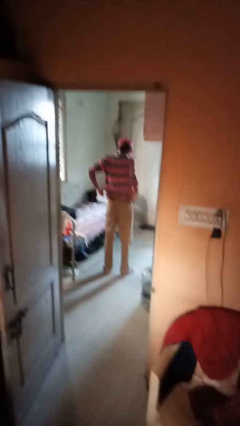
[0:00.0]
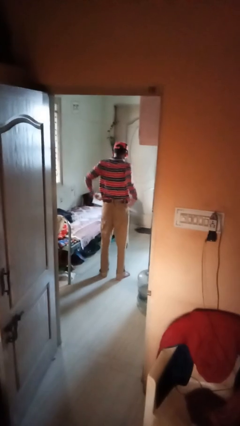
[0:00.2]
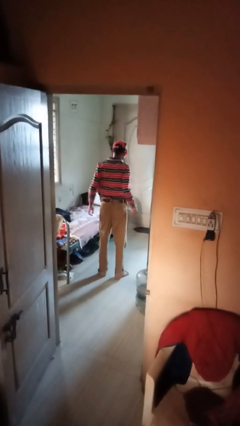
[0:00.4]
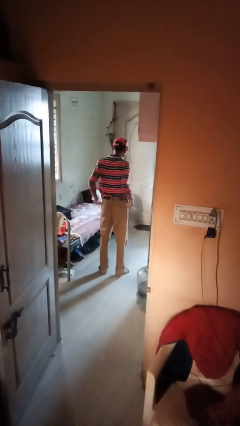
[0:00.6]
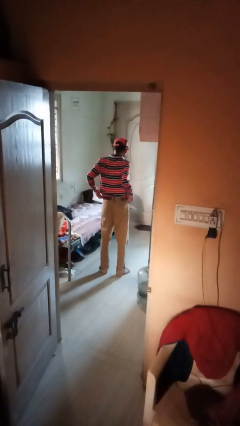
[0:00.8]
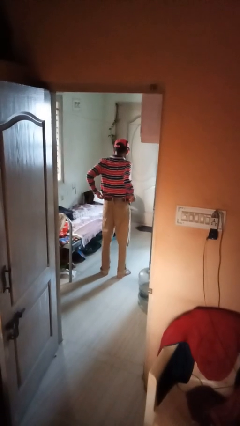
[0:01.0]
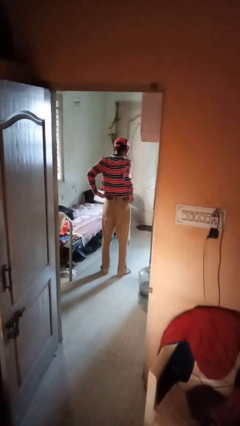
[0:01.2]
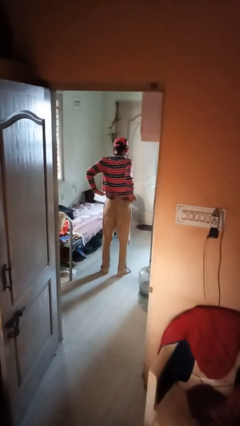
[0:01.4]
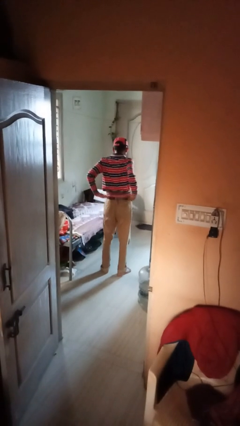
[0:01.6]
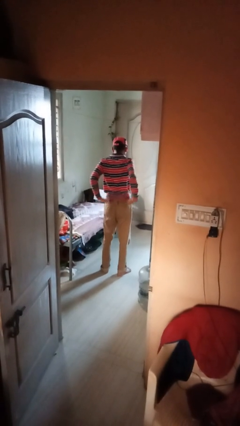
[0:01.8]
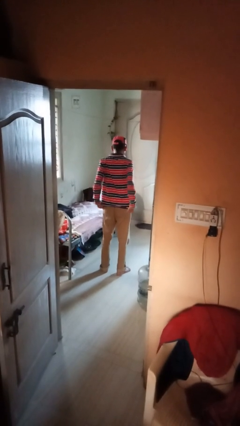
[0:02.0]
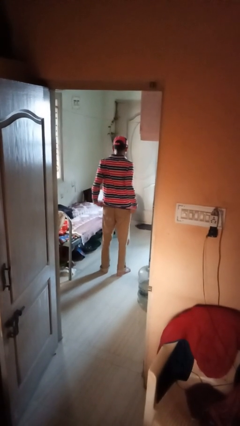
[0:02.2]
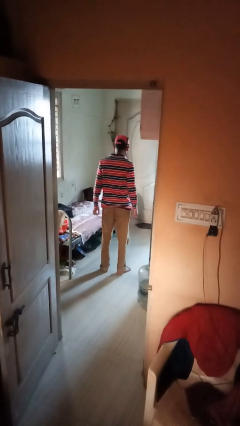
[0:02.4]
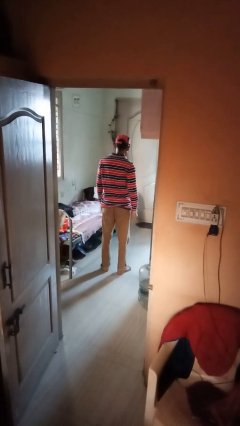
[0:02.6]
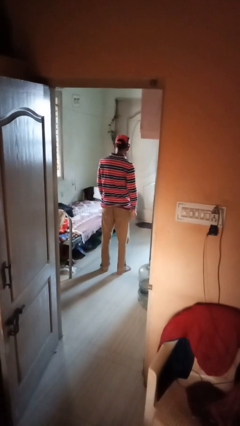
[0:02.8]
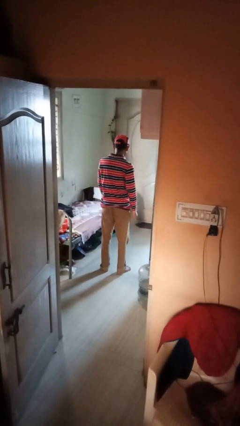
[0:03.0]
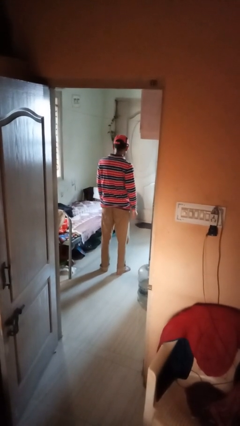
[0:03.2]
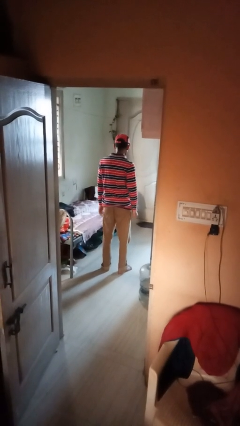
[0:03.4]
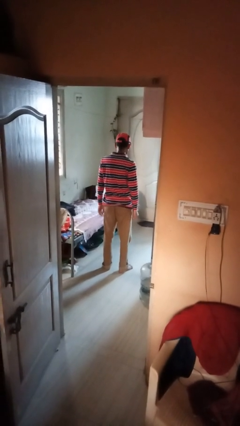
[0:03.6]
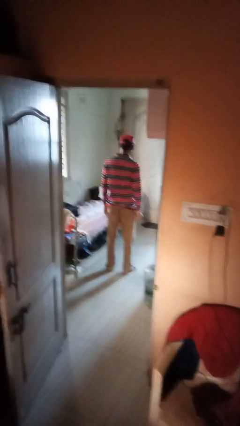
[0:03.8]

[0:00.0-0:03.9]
person untucks shirt

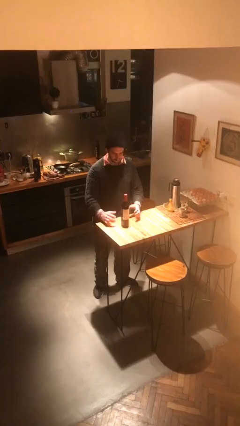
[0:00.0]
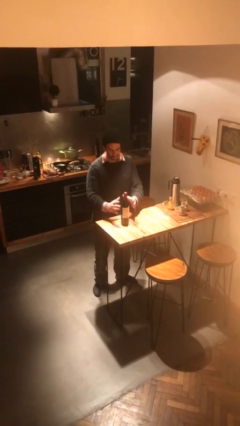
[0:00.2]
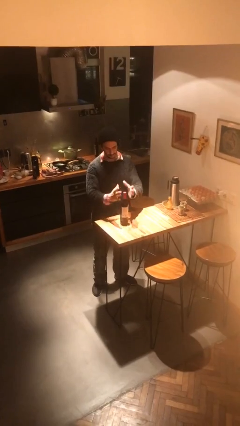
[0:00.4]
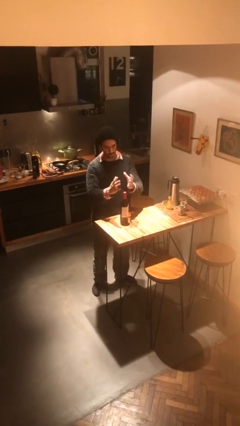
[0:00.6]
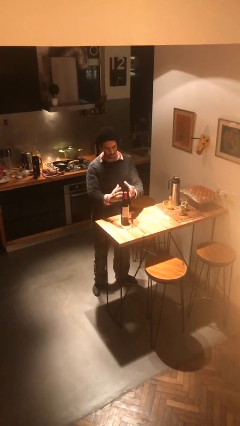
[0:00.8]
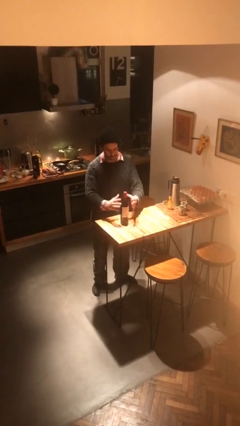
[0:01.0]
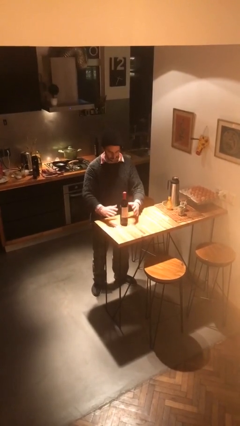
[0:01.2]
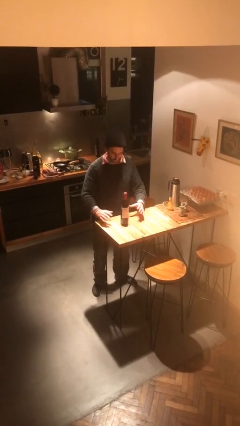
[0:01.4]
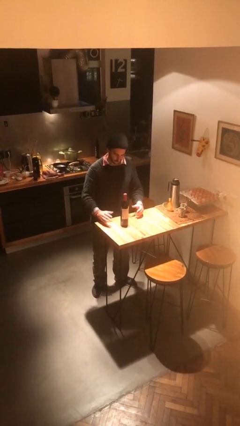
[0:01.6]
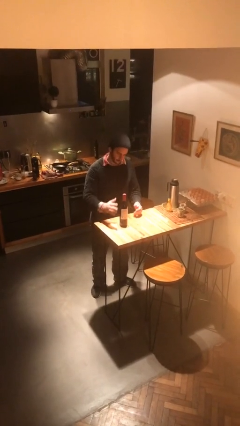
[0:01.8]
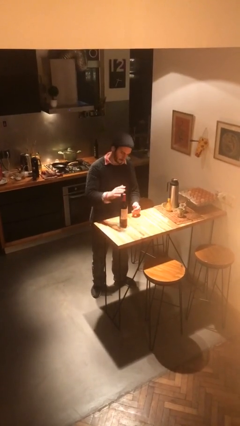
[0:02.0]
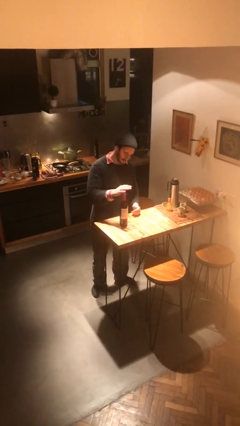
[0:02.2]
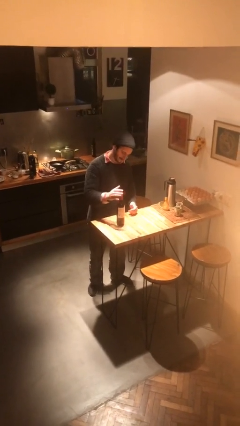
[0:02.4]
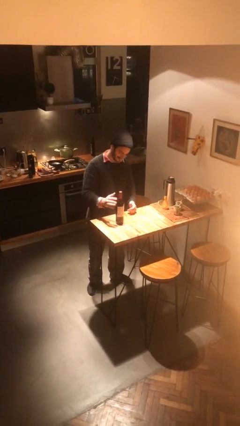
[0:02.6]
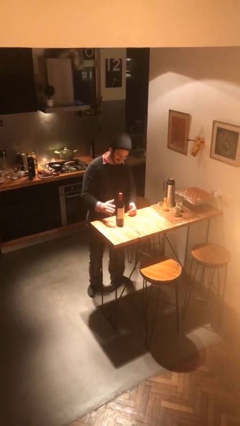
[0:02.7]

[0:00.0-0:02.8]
person waves hand over object

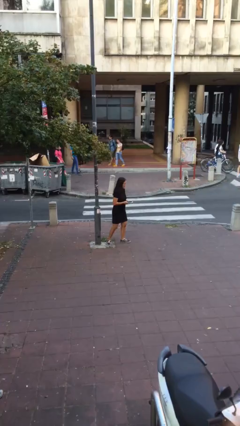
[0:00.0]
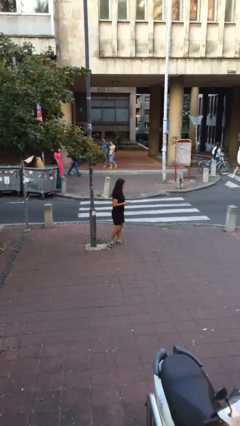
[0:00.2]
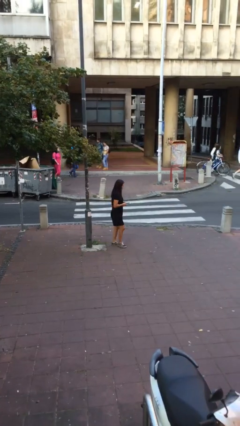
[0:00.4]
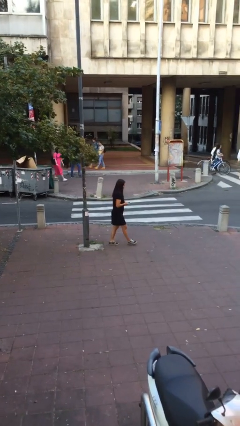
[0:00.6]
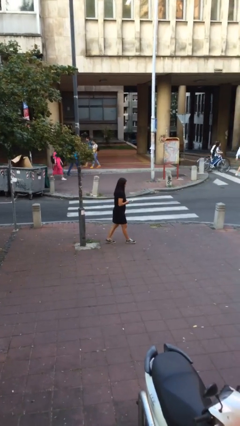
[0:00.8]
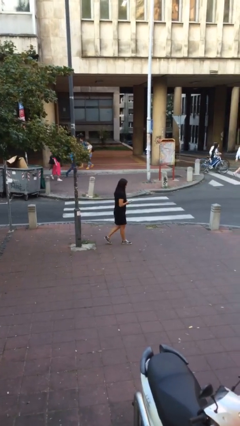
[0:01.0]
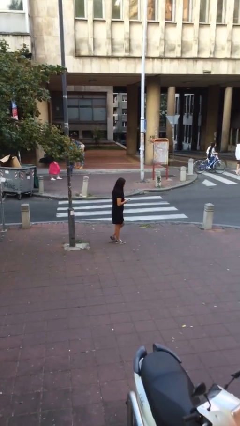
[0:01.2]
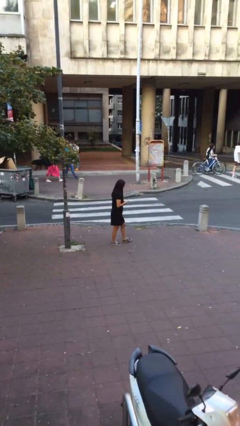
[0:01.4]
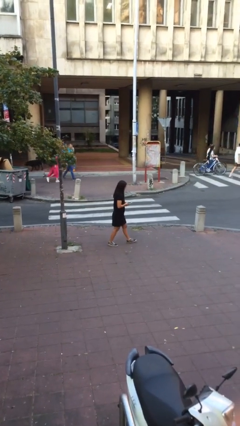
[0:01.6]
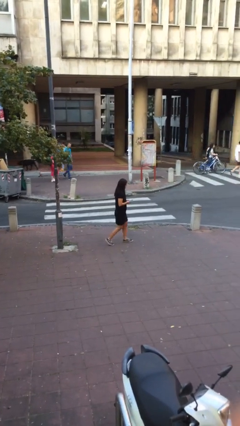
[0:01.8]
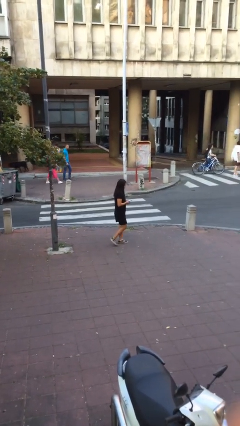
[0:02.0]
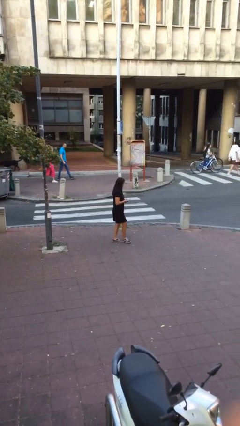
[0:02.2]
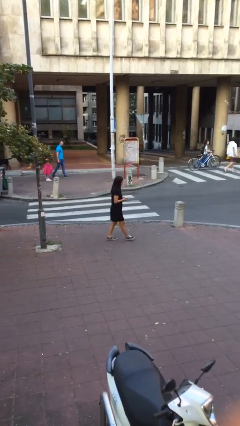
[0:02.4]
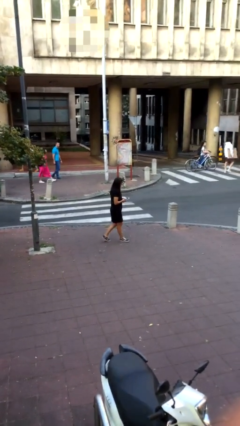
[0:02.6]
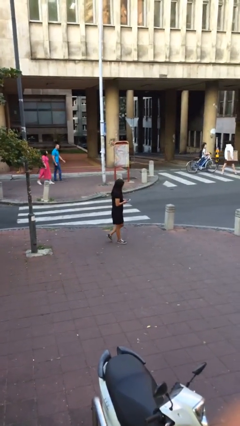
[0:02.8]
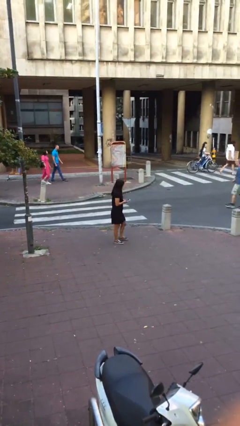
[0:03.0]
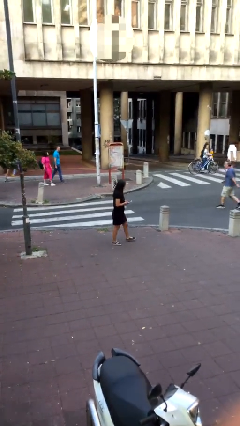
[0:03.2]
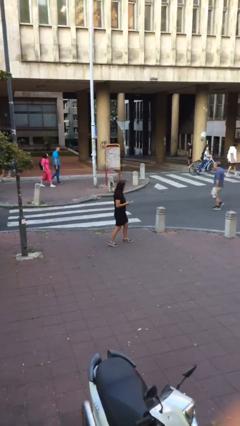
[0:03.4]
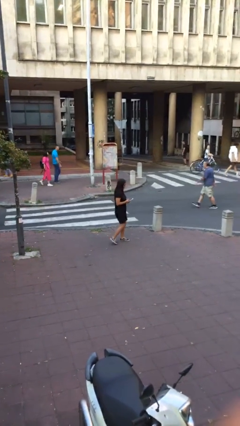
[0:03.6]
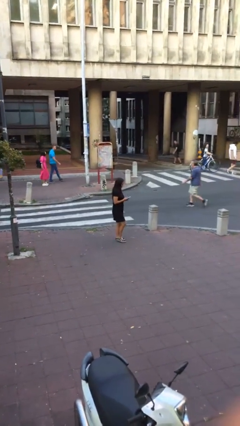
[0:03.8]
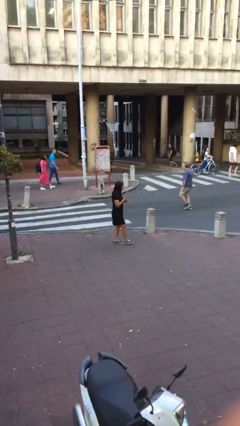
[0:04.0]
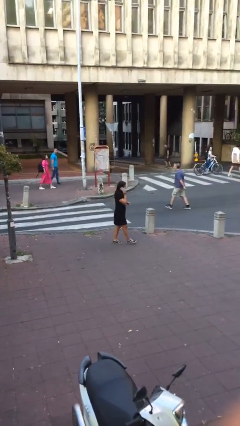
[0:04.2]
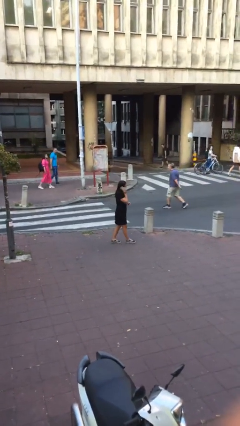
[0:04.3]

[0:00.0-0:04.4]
person texts on phone

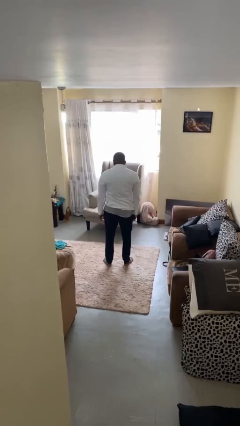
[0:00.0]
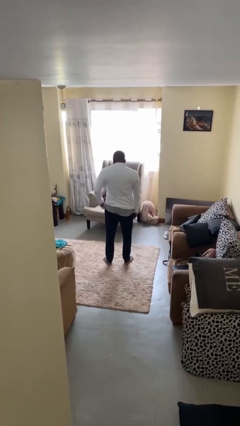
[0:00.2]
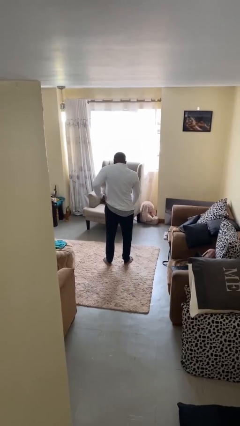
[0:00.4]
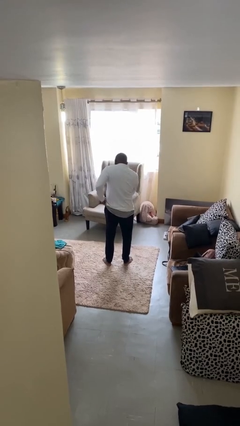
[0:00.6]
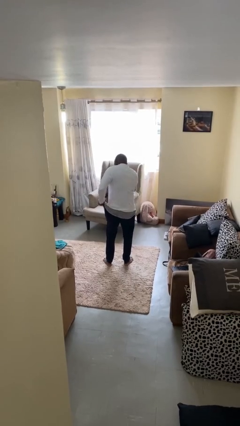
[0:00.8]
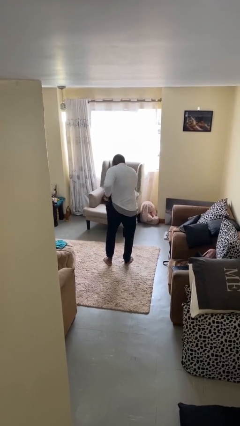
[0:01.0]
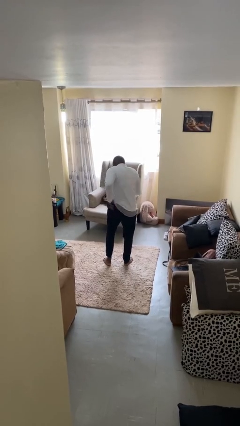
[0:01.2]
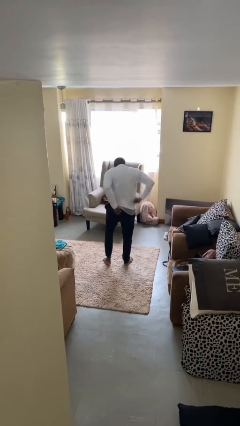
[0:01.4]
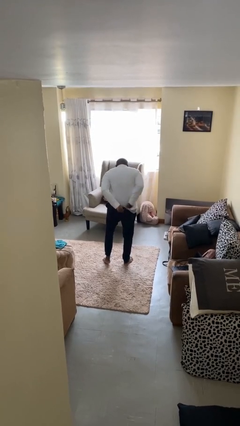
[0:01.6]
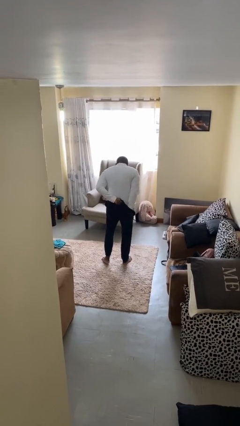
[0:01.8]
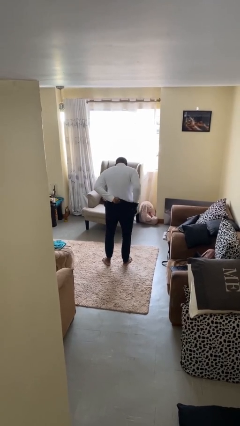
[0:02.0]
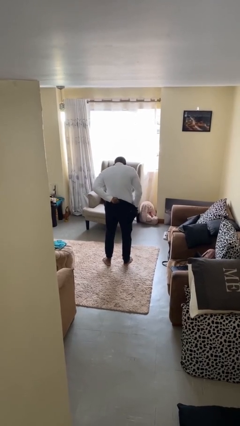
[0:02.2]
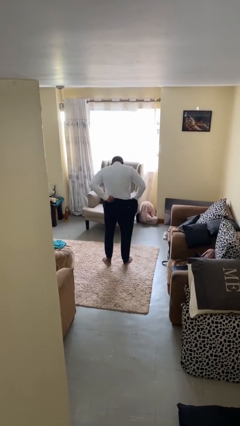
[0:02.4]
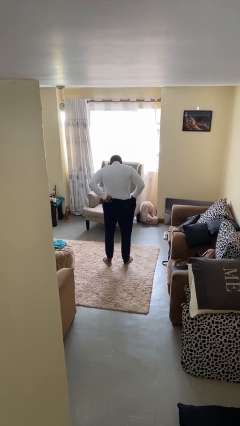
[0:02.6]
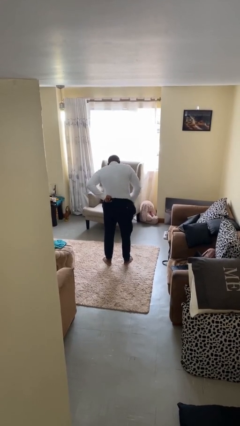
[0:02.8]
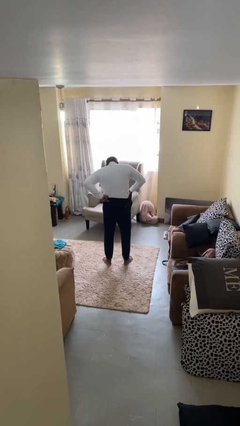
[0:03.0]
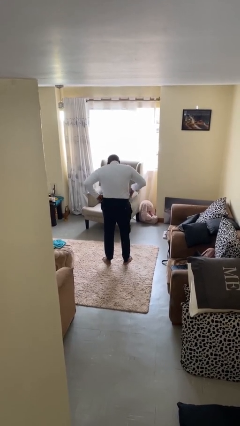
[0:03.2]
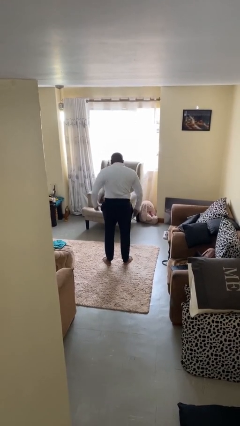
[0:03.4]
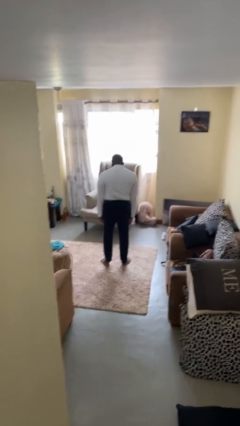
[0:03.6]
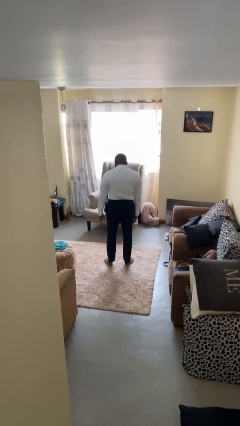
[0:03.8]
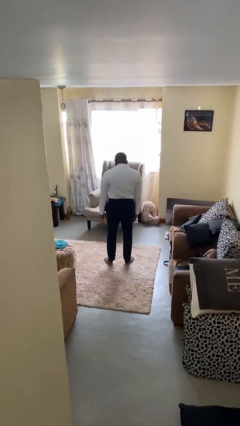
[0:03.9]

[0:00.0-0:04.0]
person tucks in shirt

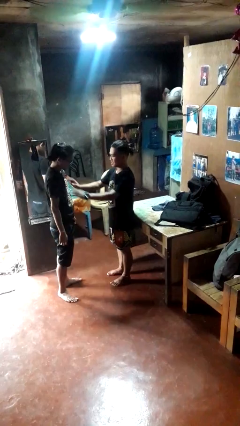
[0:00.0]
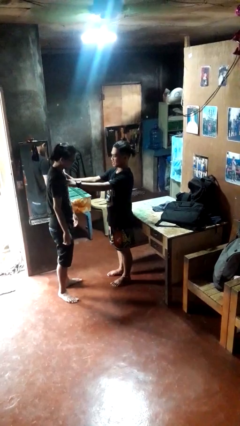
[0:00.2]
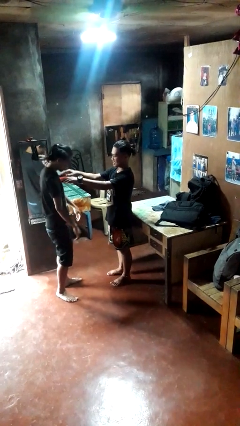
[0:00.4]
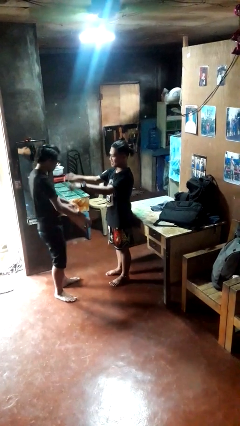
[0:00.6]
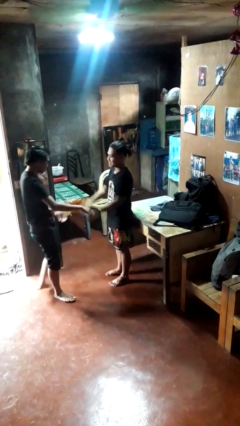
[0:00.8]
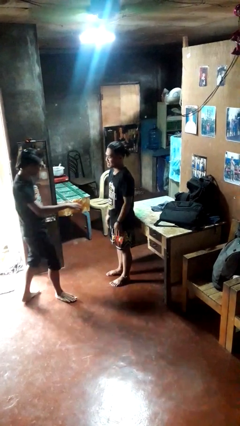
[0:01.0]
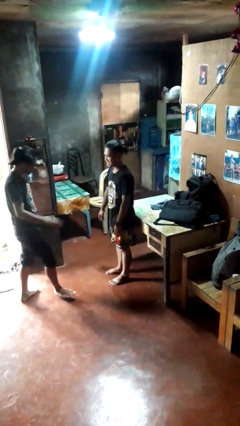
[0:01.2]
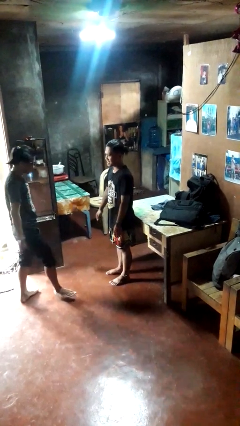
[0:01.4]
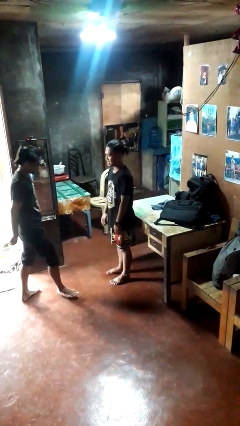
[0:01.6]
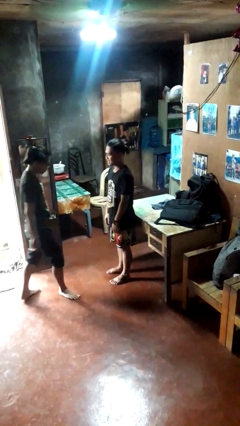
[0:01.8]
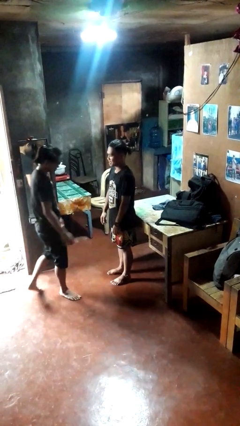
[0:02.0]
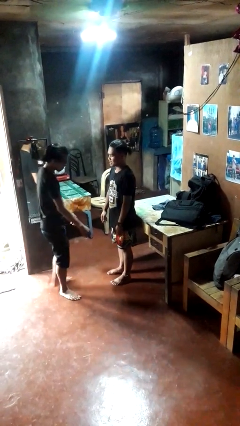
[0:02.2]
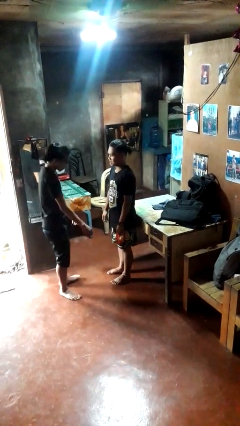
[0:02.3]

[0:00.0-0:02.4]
person shoves person

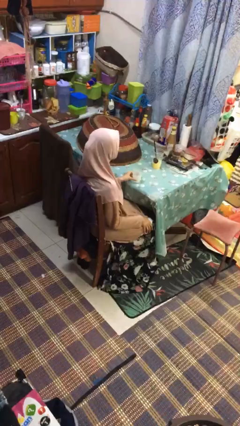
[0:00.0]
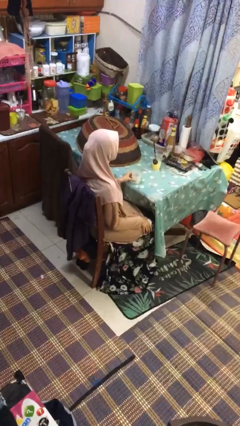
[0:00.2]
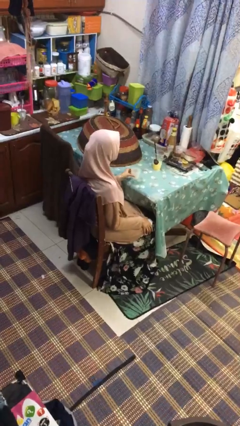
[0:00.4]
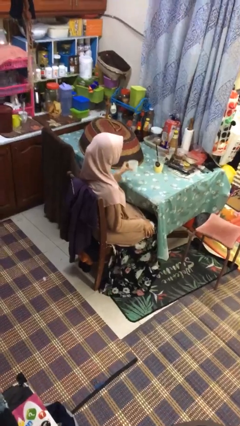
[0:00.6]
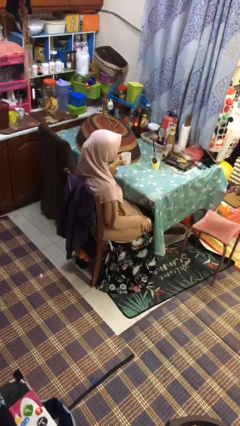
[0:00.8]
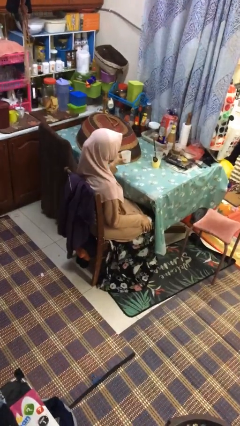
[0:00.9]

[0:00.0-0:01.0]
person picks up object from table
